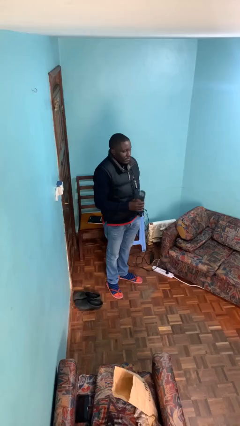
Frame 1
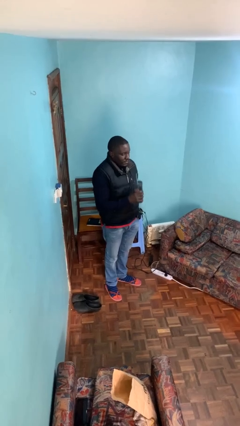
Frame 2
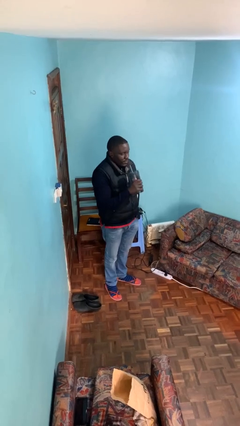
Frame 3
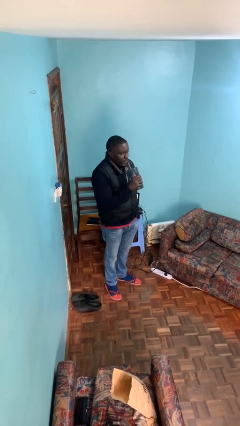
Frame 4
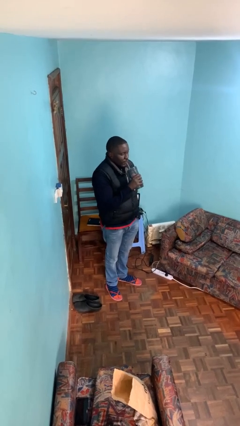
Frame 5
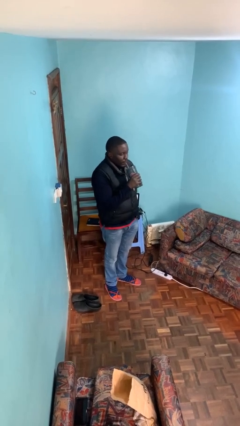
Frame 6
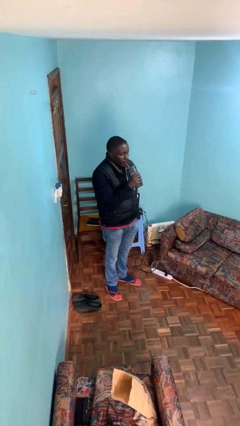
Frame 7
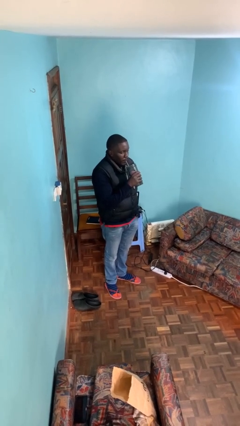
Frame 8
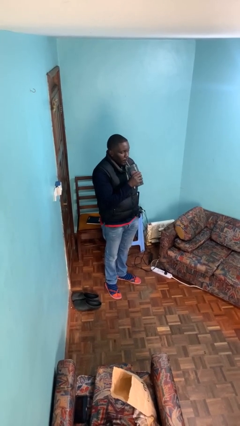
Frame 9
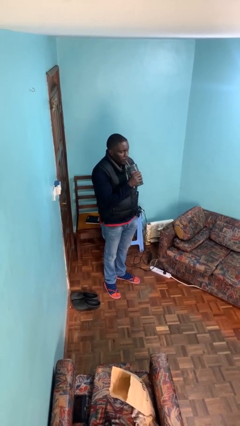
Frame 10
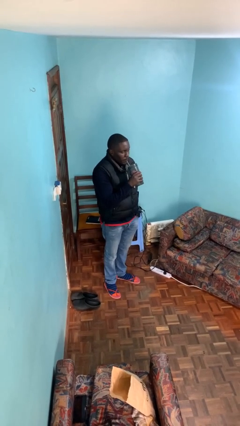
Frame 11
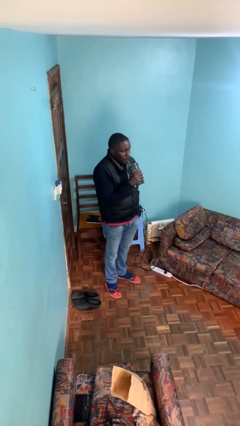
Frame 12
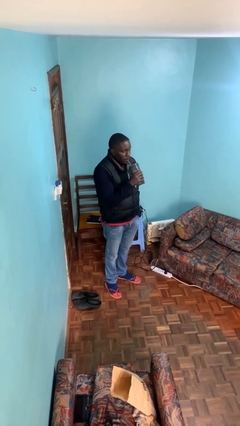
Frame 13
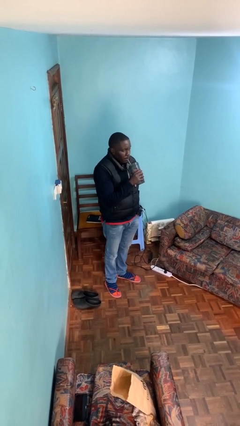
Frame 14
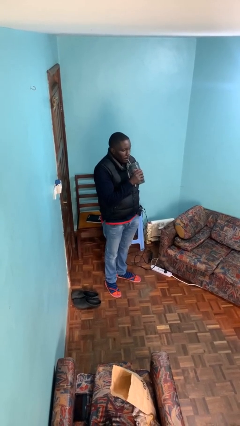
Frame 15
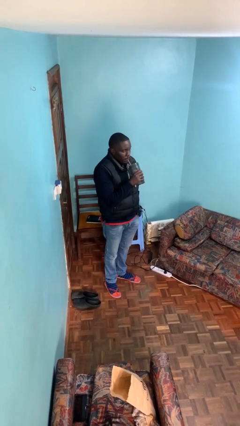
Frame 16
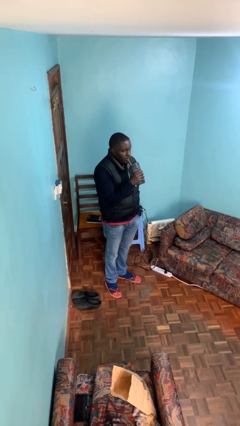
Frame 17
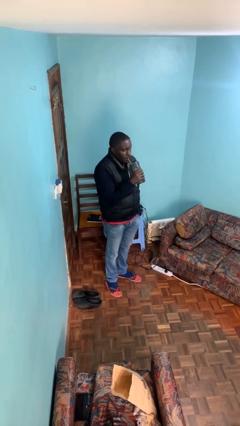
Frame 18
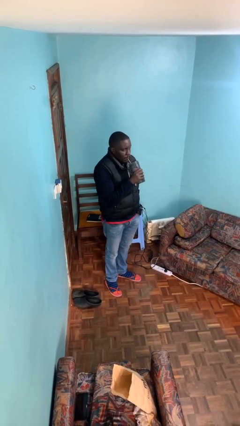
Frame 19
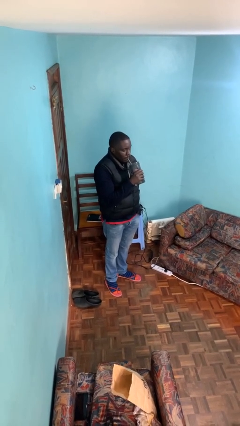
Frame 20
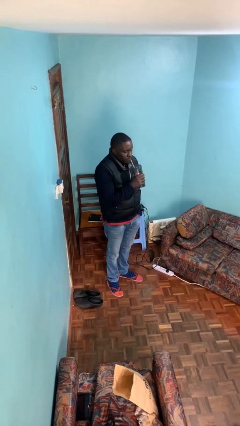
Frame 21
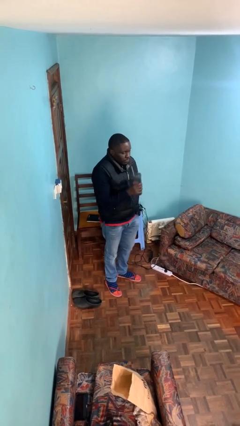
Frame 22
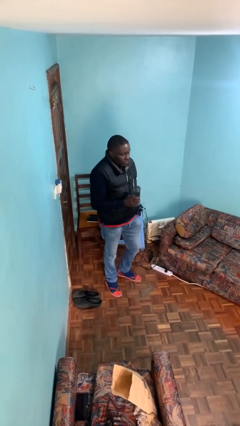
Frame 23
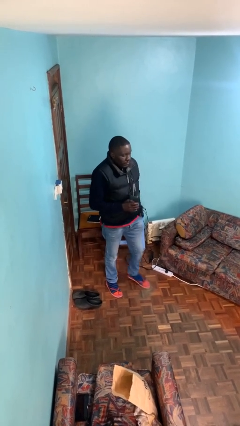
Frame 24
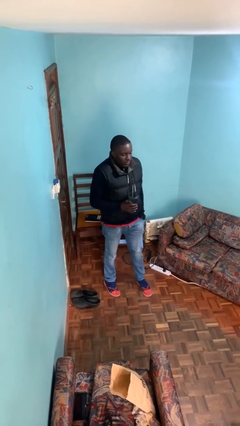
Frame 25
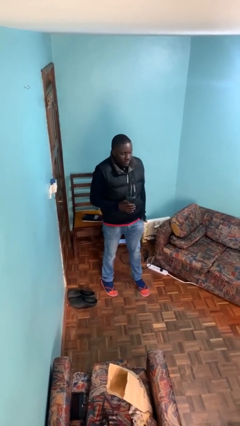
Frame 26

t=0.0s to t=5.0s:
person drinks from straw

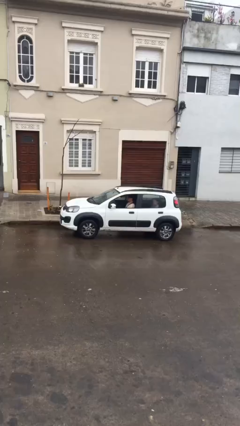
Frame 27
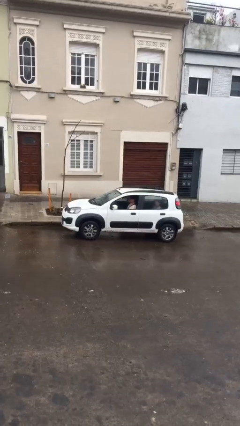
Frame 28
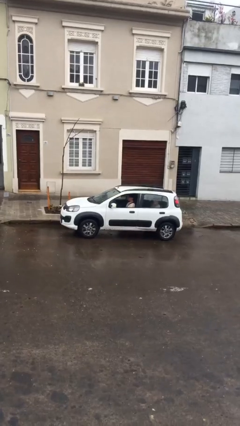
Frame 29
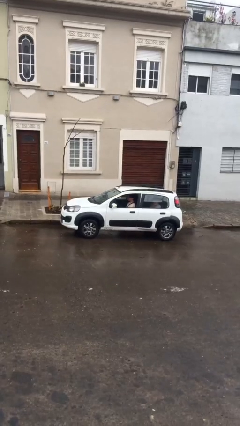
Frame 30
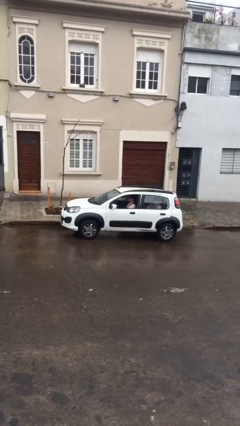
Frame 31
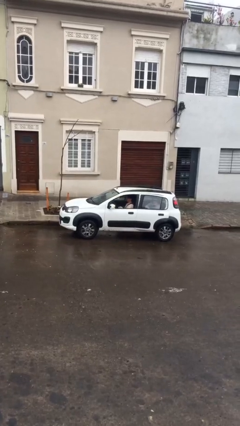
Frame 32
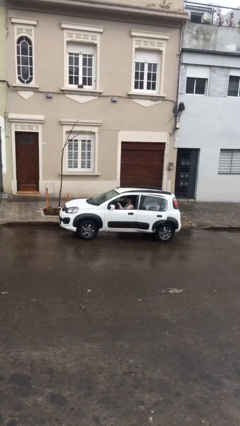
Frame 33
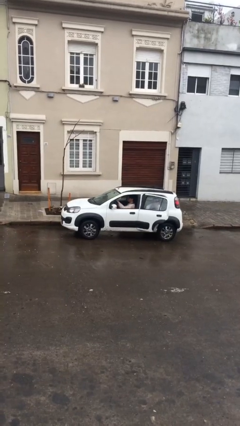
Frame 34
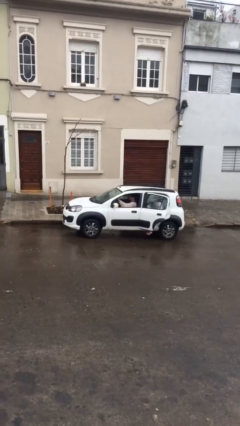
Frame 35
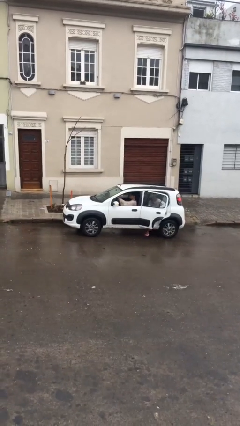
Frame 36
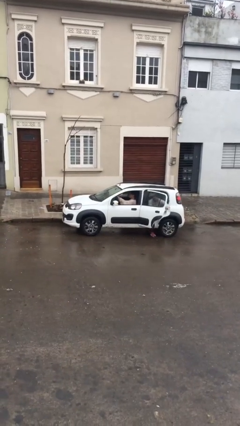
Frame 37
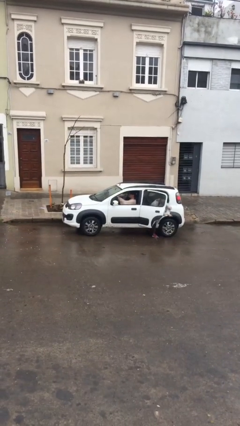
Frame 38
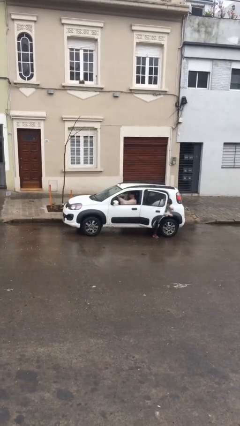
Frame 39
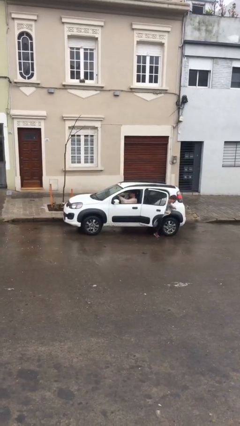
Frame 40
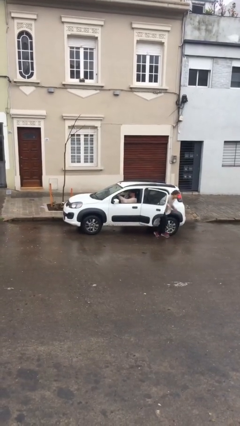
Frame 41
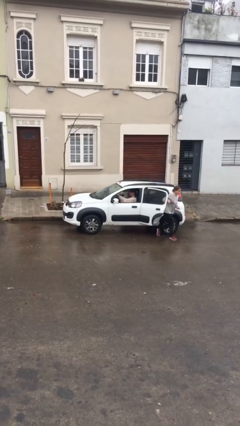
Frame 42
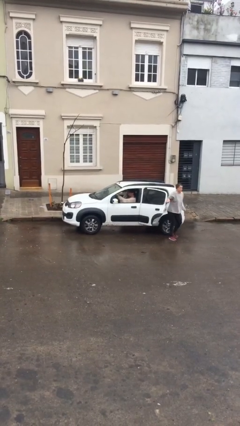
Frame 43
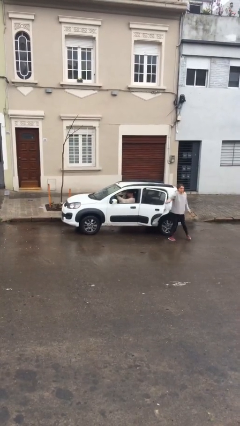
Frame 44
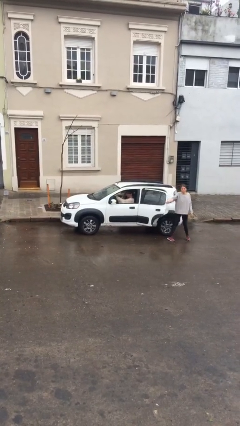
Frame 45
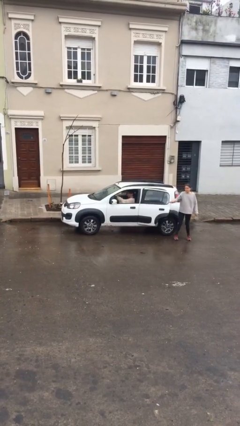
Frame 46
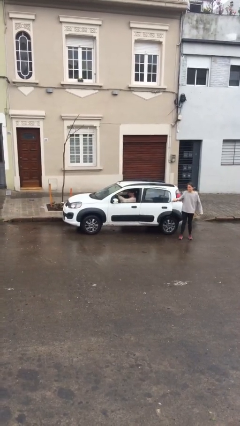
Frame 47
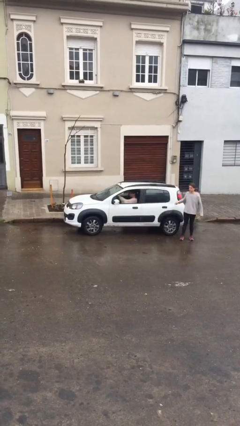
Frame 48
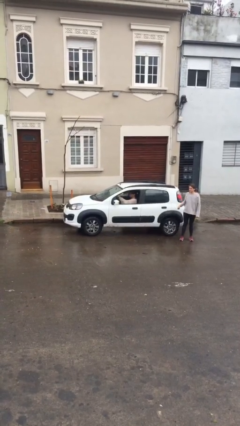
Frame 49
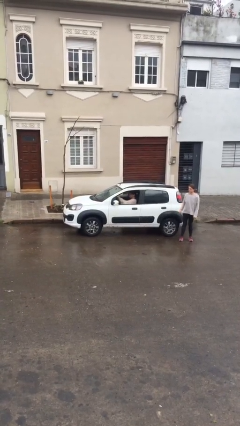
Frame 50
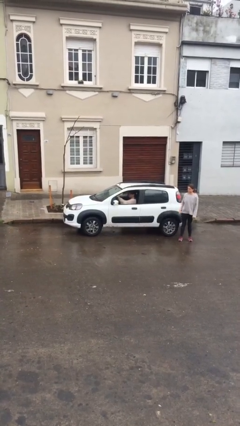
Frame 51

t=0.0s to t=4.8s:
car drops off person

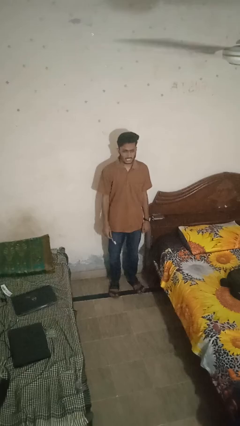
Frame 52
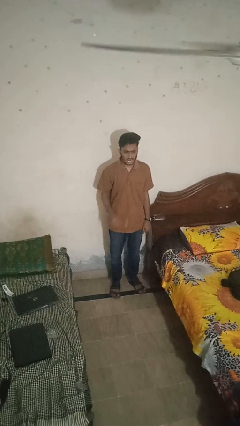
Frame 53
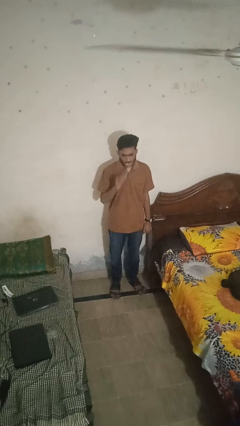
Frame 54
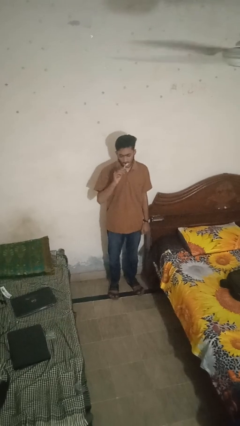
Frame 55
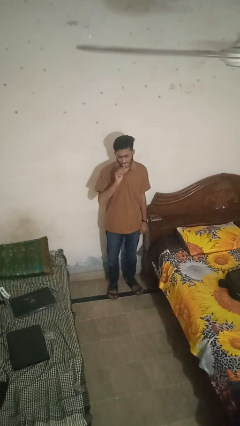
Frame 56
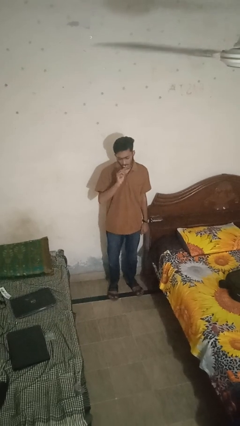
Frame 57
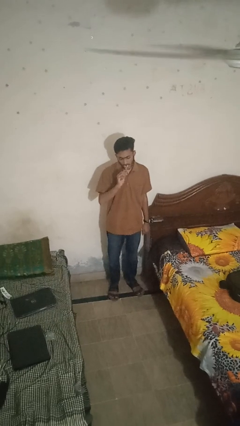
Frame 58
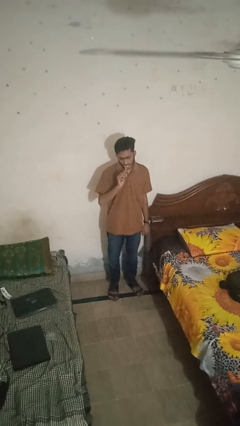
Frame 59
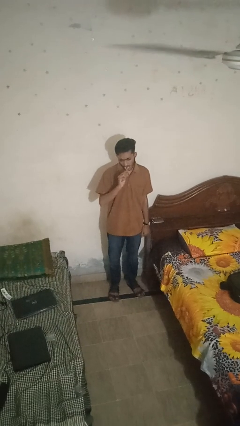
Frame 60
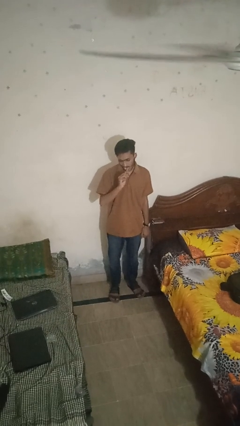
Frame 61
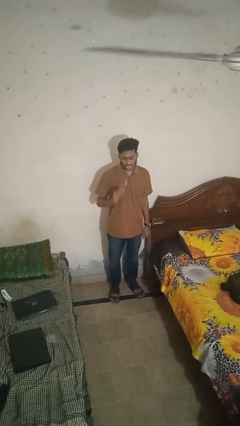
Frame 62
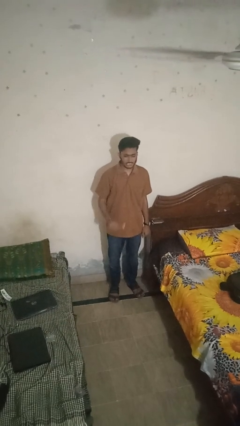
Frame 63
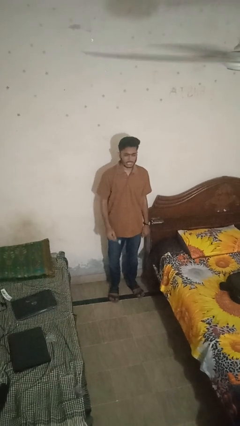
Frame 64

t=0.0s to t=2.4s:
person brushes teeth

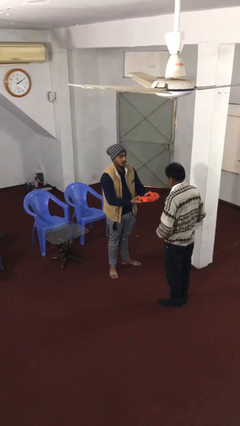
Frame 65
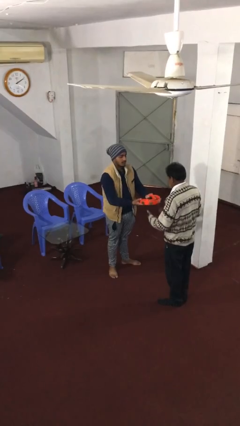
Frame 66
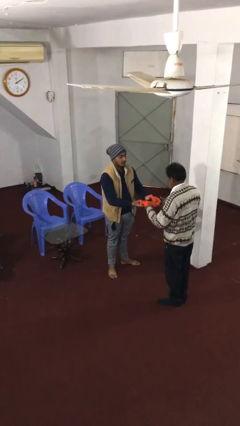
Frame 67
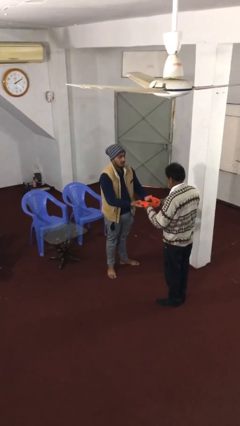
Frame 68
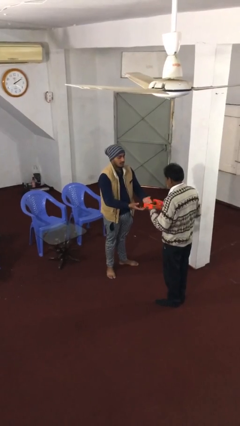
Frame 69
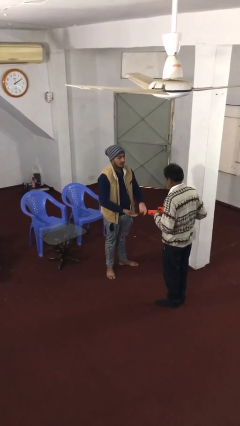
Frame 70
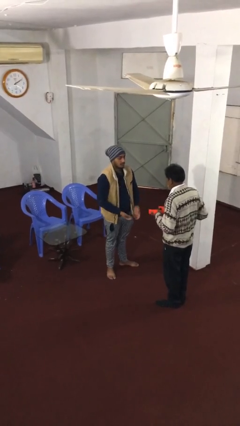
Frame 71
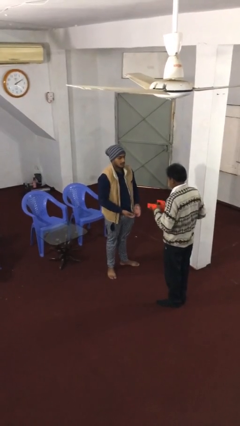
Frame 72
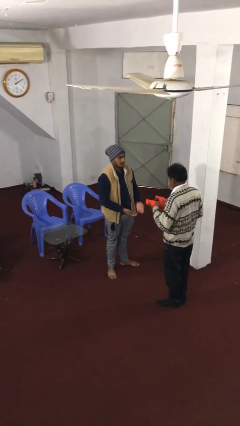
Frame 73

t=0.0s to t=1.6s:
person transfers object to person

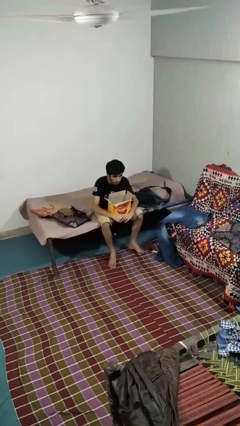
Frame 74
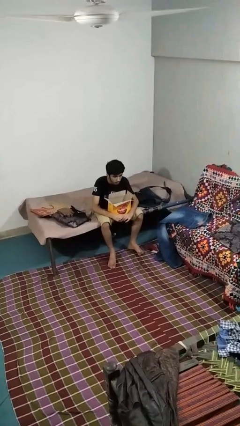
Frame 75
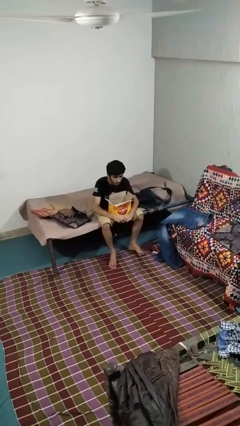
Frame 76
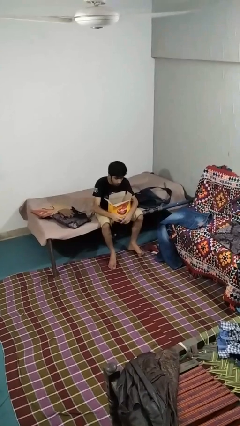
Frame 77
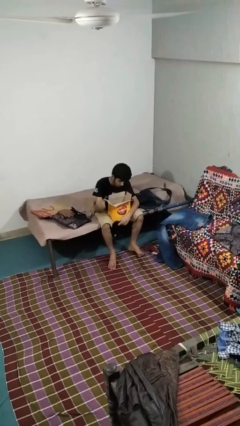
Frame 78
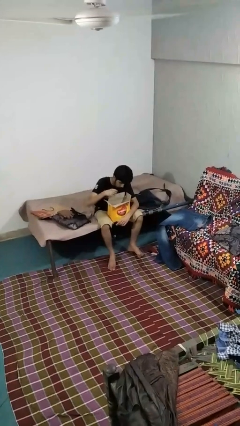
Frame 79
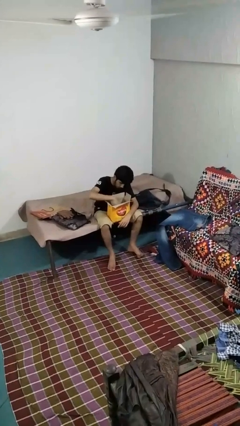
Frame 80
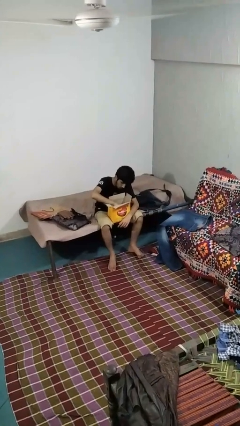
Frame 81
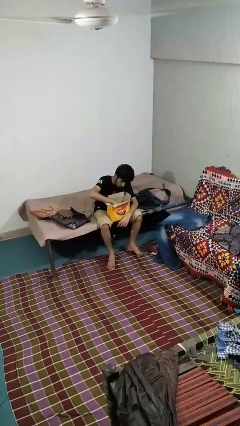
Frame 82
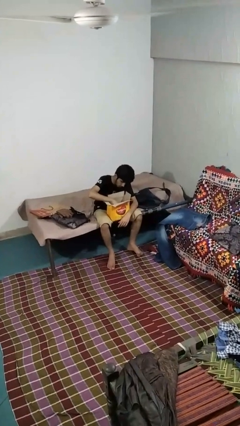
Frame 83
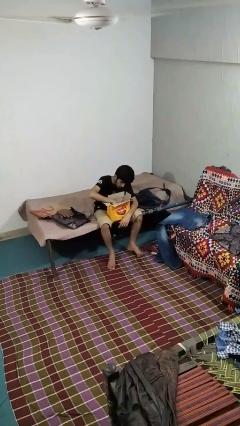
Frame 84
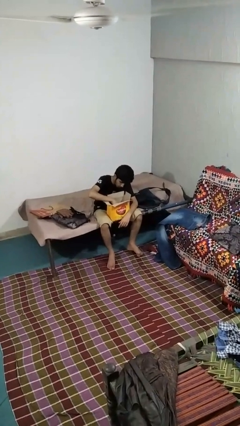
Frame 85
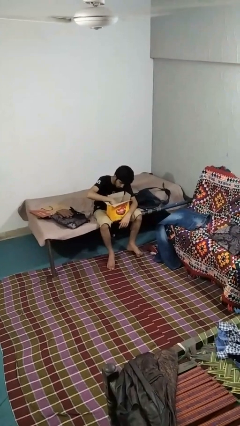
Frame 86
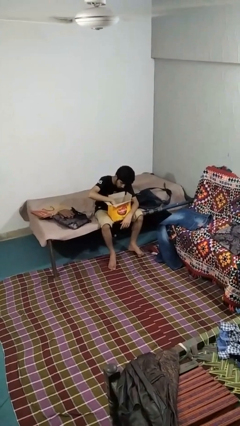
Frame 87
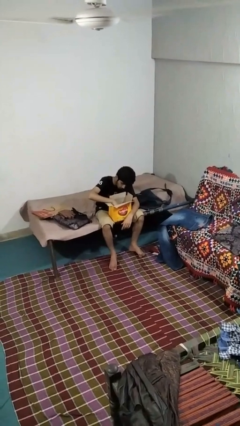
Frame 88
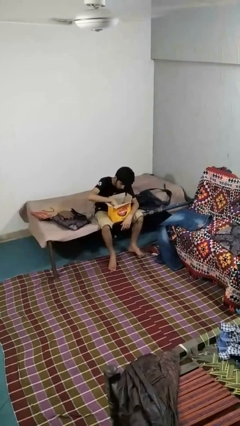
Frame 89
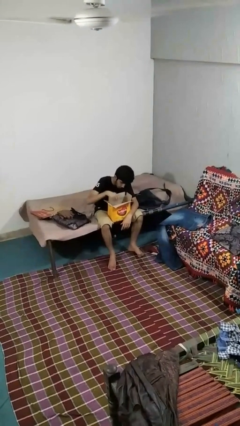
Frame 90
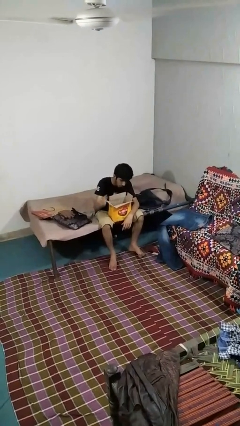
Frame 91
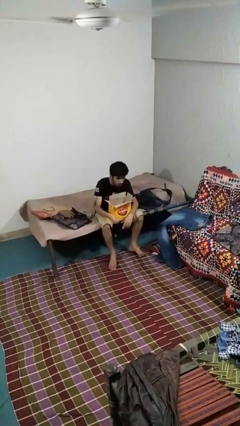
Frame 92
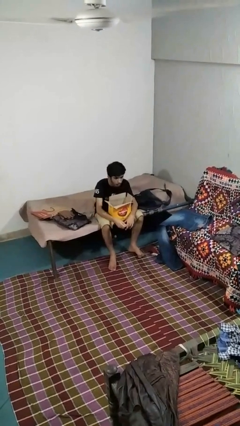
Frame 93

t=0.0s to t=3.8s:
person searches in box
